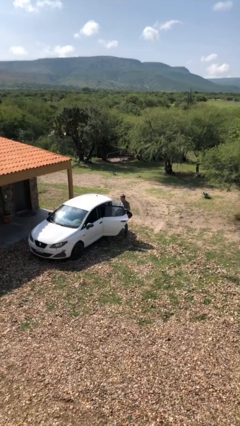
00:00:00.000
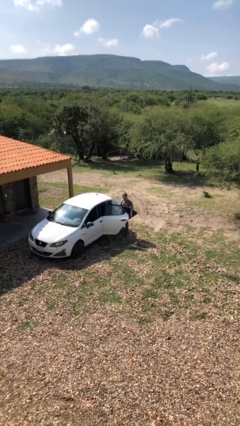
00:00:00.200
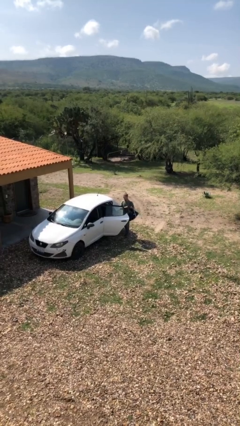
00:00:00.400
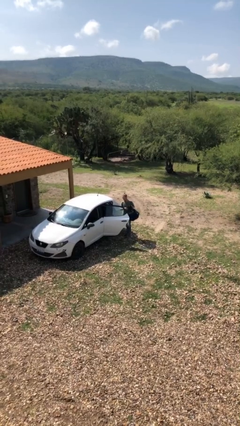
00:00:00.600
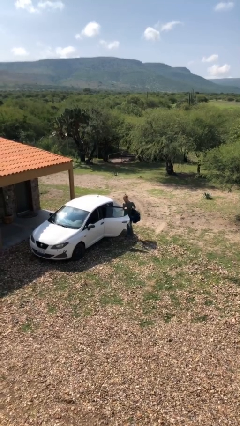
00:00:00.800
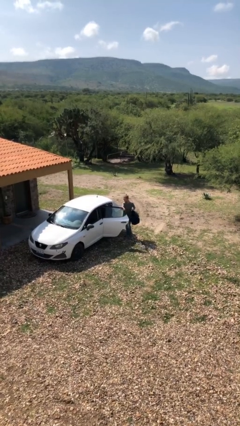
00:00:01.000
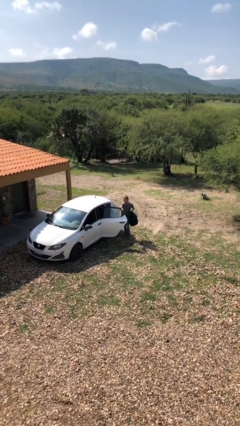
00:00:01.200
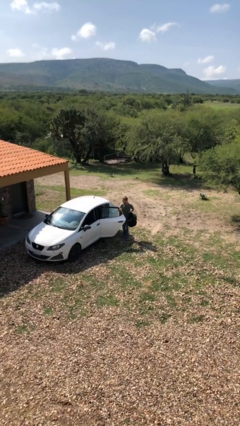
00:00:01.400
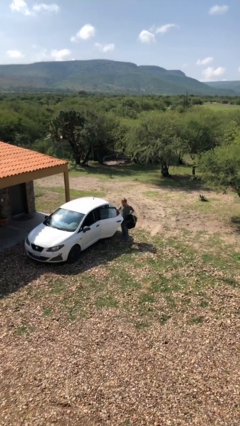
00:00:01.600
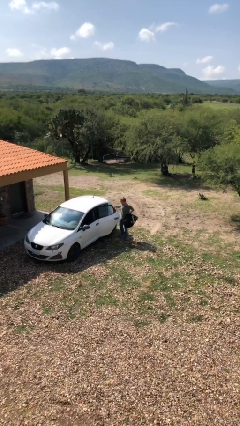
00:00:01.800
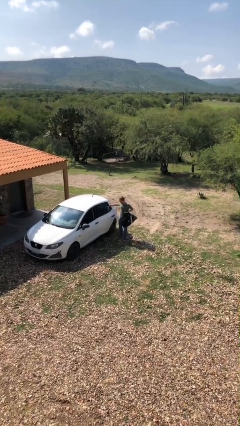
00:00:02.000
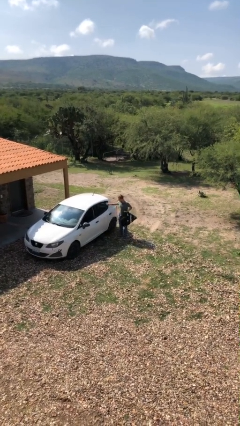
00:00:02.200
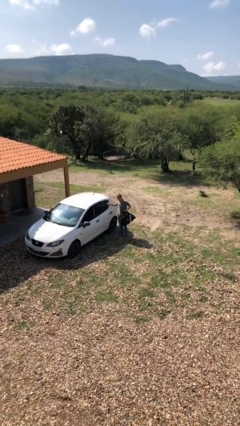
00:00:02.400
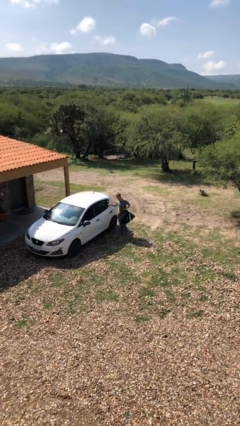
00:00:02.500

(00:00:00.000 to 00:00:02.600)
person closes car door

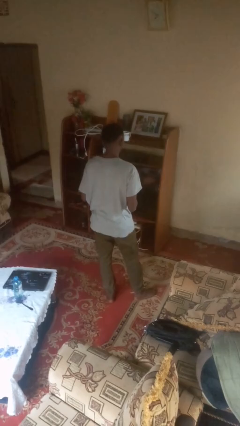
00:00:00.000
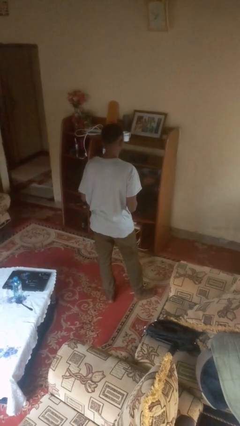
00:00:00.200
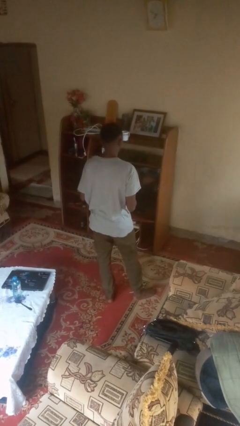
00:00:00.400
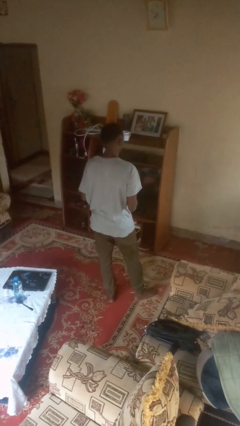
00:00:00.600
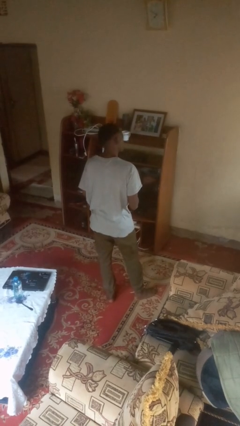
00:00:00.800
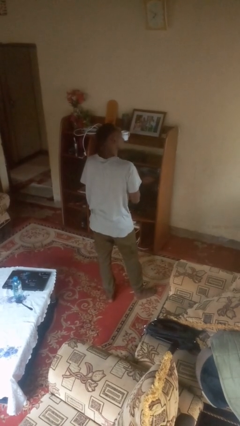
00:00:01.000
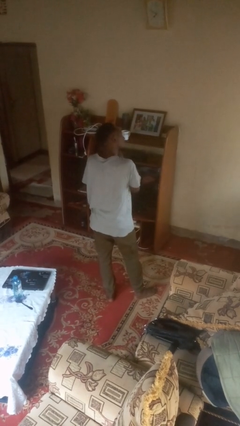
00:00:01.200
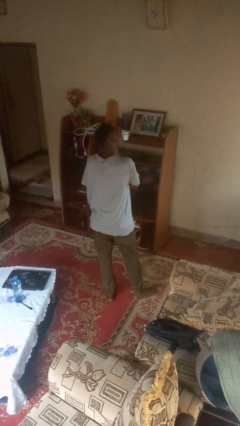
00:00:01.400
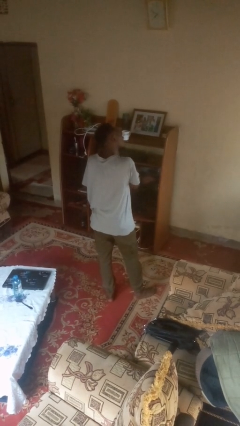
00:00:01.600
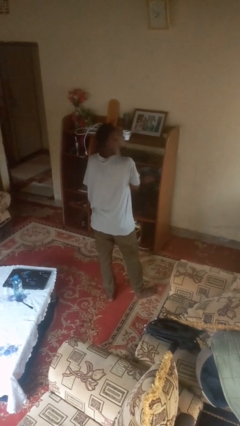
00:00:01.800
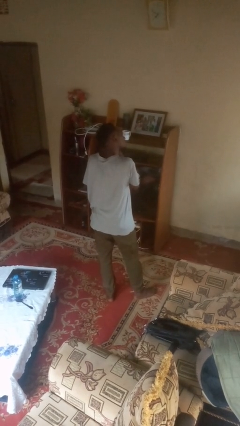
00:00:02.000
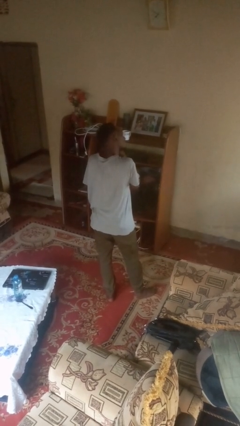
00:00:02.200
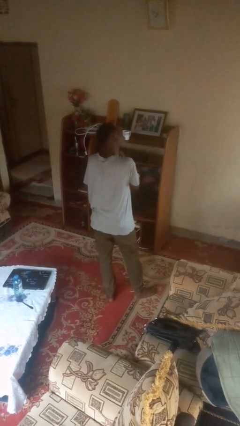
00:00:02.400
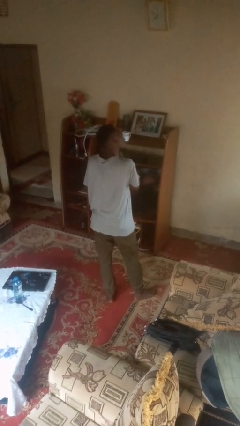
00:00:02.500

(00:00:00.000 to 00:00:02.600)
person puts on earrings

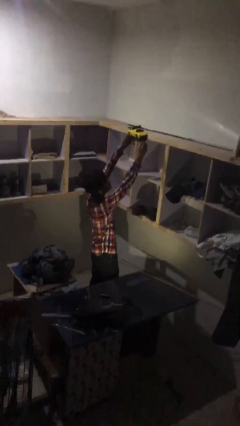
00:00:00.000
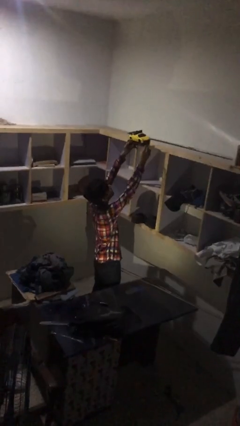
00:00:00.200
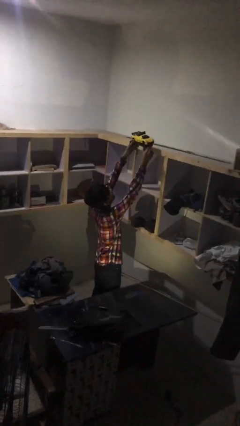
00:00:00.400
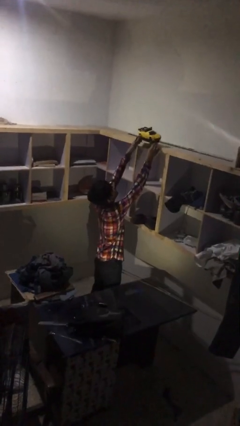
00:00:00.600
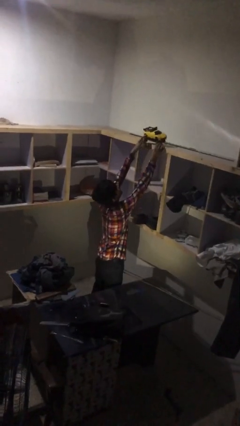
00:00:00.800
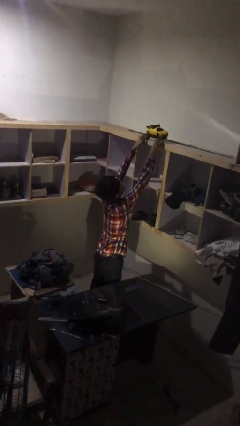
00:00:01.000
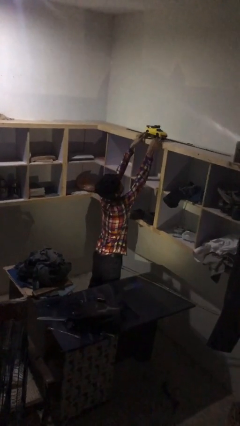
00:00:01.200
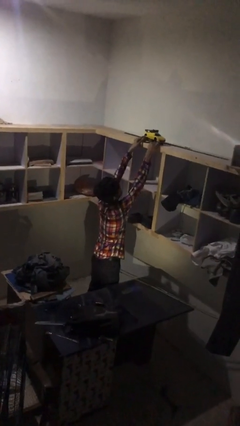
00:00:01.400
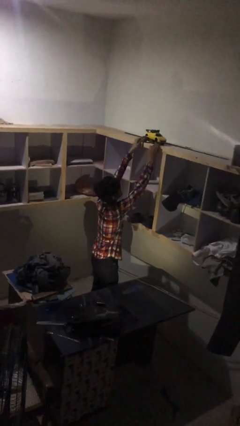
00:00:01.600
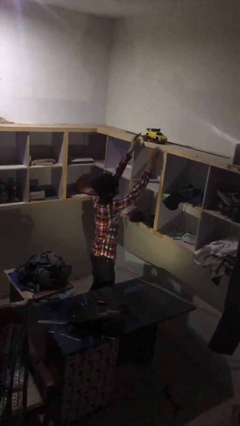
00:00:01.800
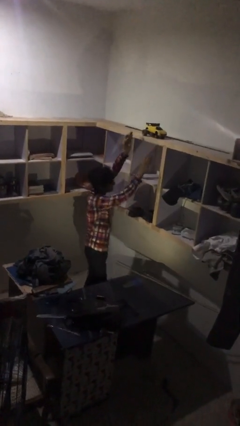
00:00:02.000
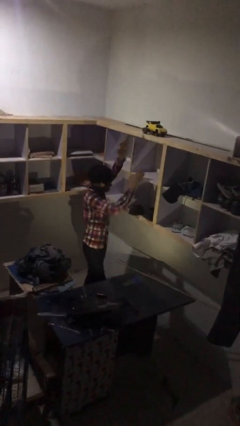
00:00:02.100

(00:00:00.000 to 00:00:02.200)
person puts down object on shelf

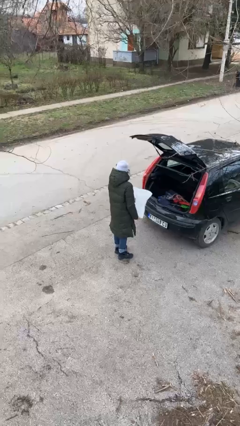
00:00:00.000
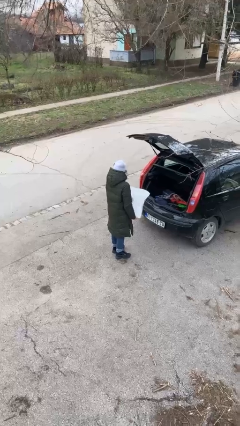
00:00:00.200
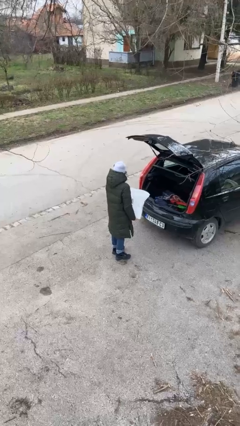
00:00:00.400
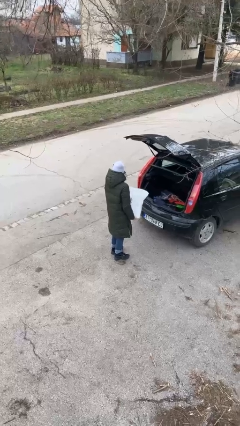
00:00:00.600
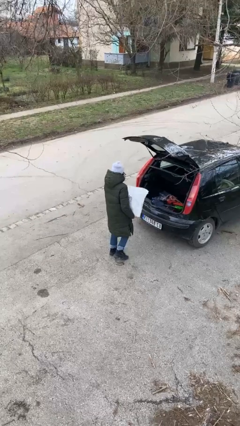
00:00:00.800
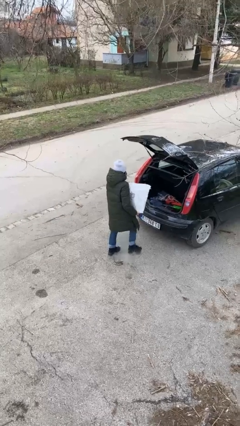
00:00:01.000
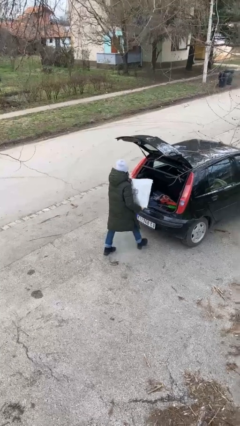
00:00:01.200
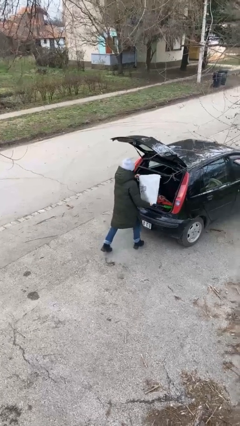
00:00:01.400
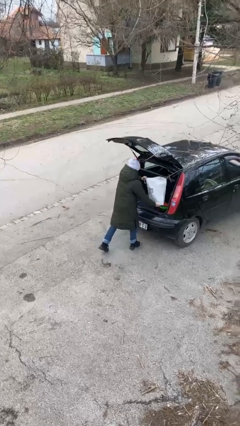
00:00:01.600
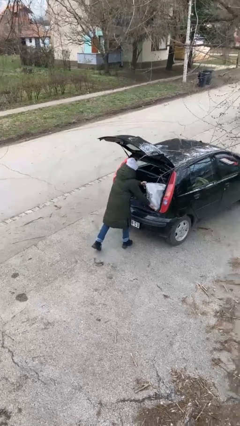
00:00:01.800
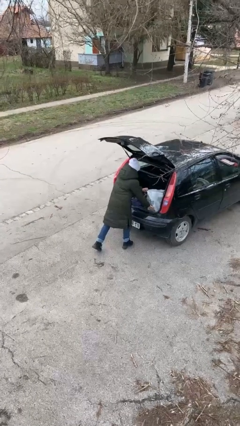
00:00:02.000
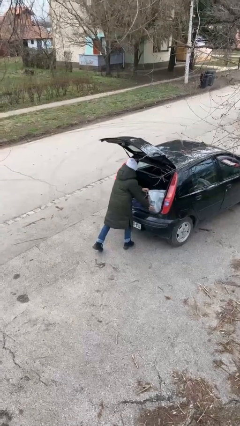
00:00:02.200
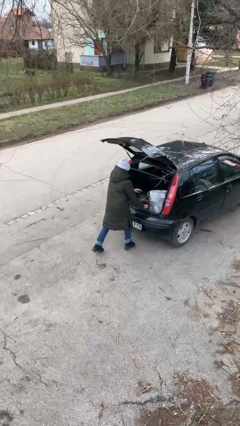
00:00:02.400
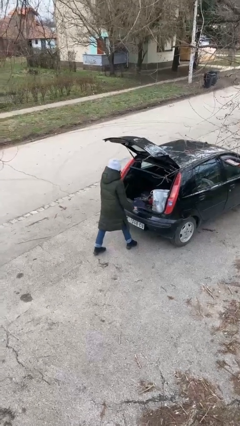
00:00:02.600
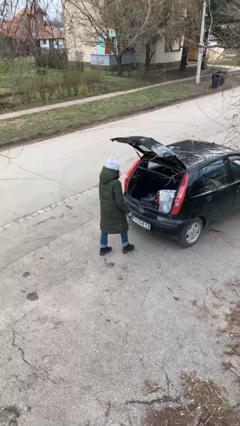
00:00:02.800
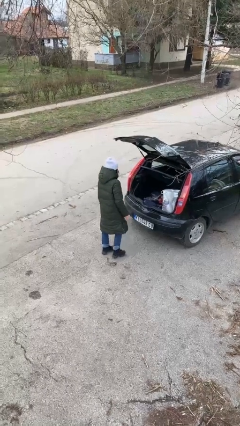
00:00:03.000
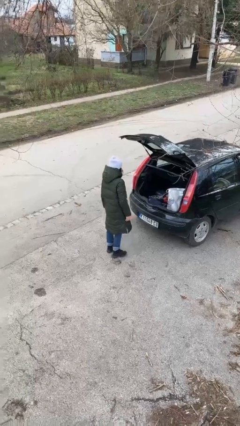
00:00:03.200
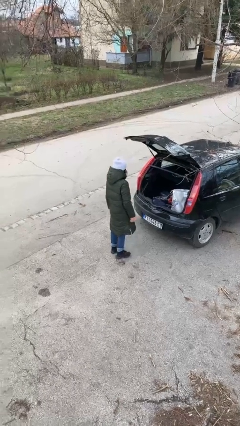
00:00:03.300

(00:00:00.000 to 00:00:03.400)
person loads car

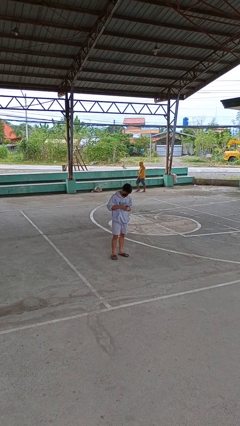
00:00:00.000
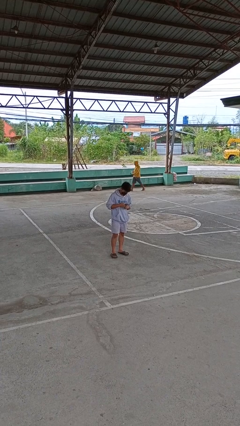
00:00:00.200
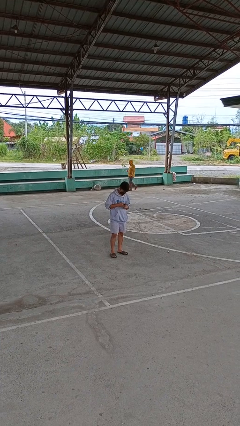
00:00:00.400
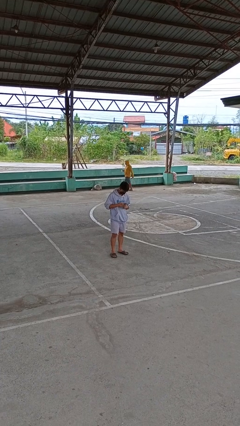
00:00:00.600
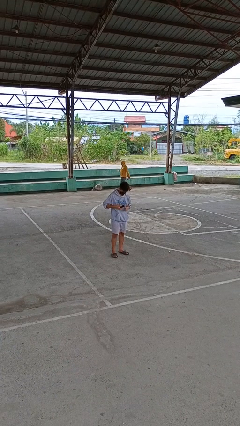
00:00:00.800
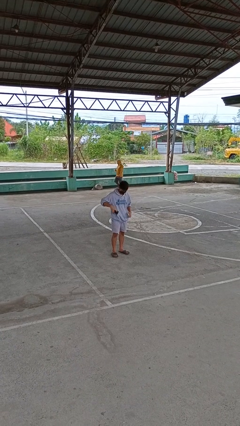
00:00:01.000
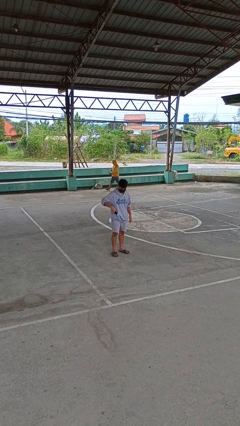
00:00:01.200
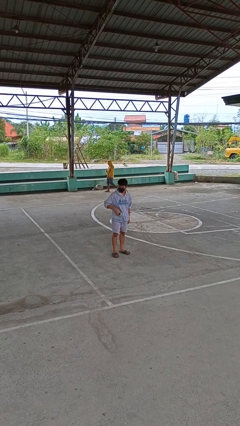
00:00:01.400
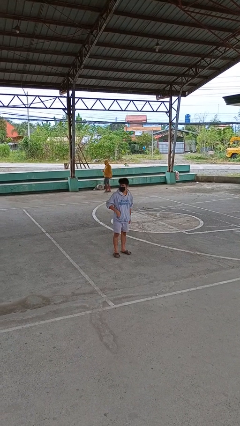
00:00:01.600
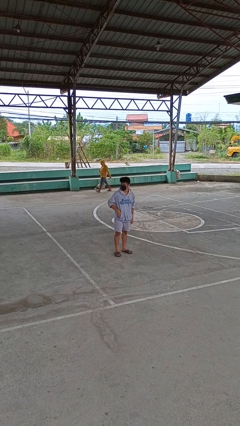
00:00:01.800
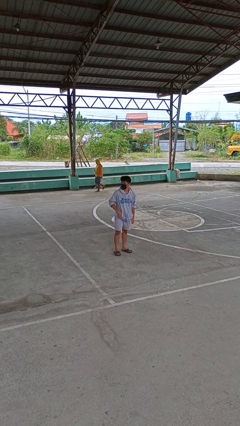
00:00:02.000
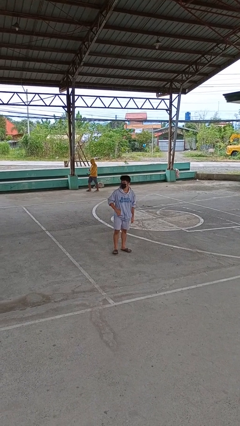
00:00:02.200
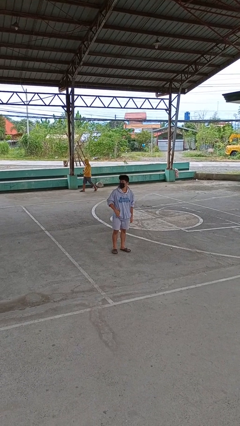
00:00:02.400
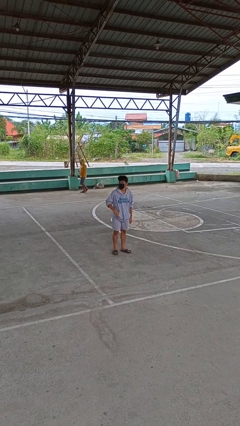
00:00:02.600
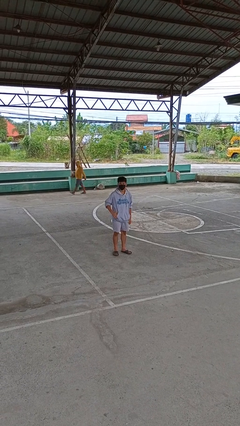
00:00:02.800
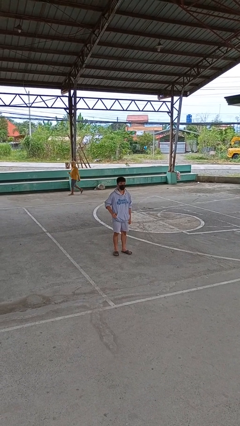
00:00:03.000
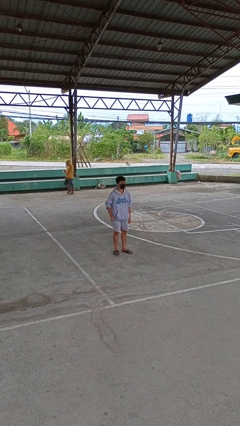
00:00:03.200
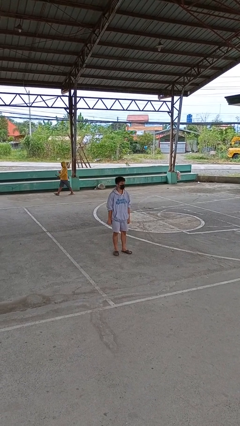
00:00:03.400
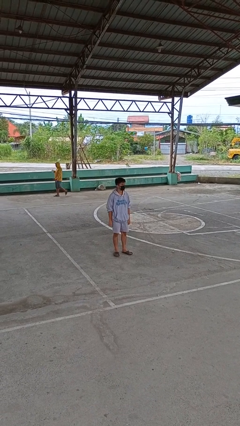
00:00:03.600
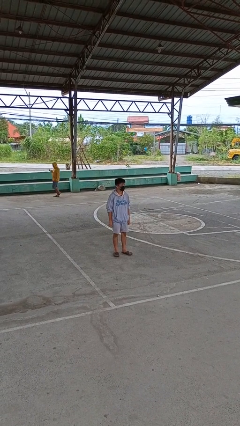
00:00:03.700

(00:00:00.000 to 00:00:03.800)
person puts phone into pocket

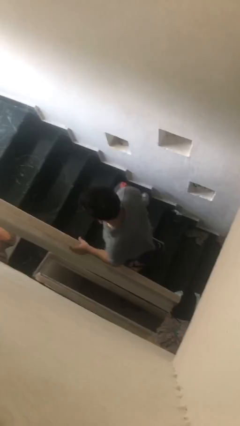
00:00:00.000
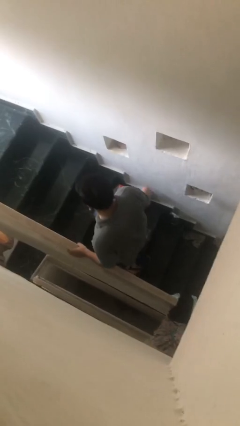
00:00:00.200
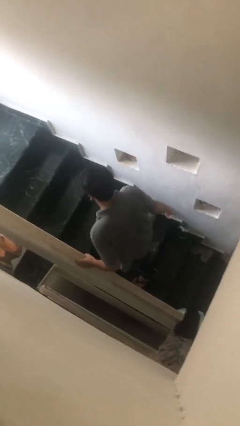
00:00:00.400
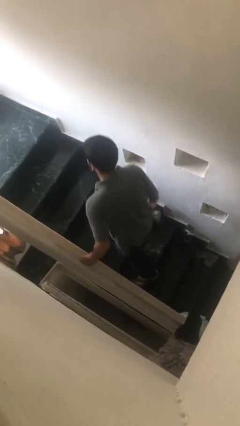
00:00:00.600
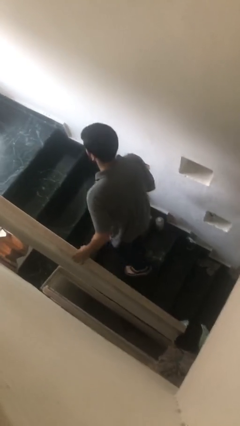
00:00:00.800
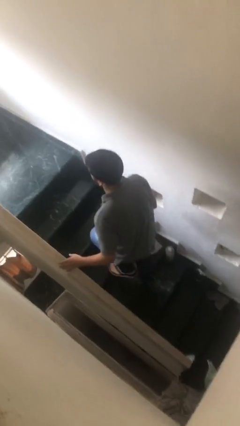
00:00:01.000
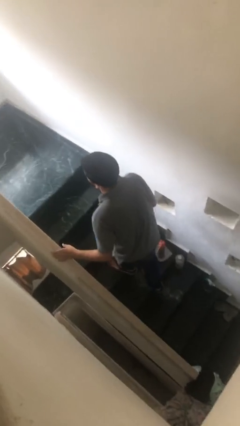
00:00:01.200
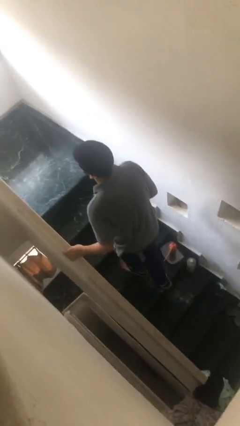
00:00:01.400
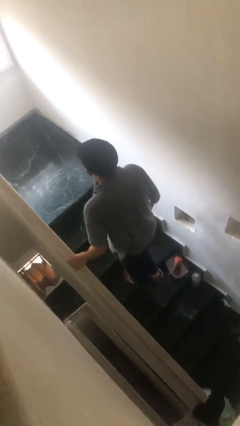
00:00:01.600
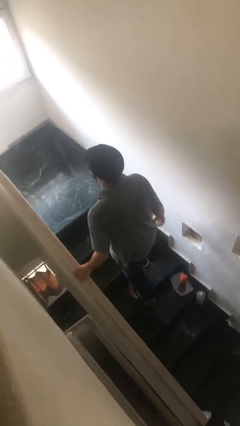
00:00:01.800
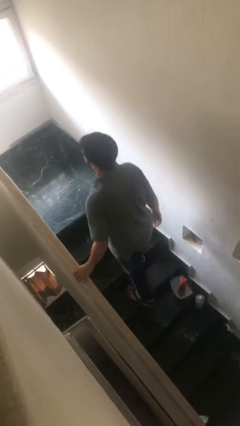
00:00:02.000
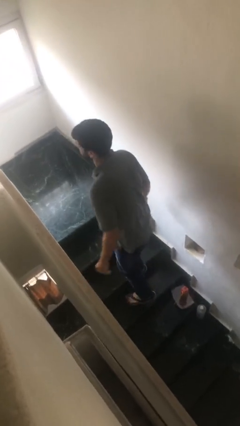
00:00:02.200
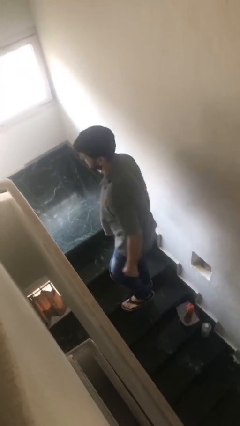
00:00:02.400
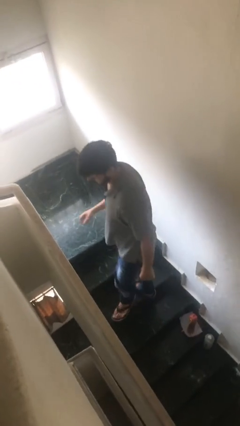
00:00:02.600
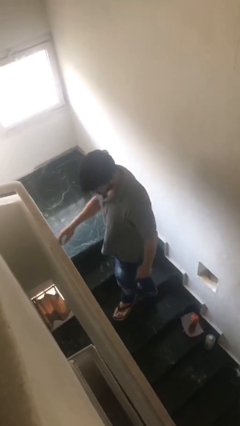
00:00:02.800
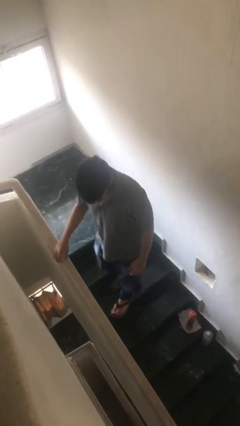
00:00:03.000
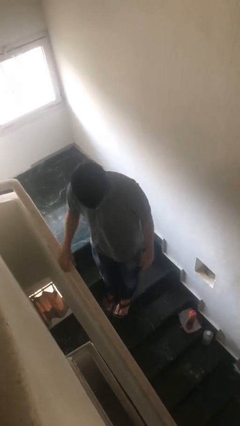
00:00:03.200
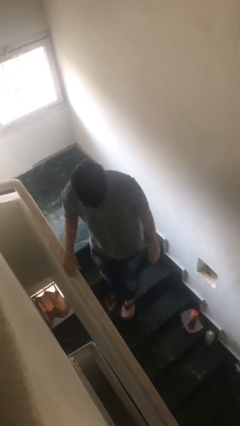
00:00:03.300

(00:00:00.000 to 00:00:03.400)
person climbs up stairs
